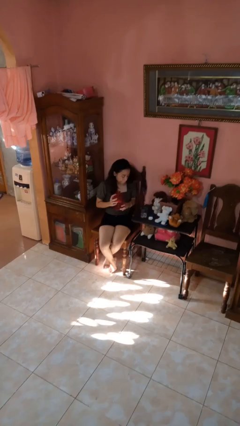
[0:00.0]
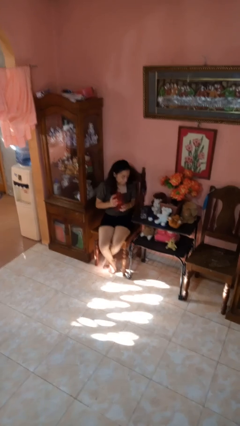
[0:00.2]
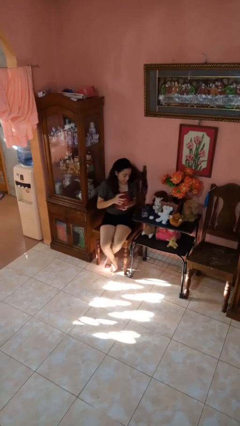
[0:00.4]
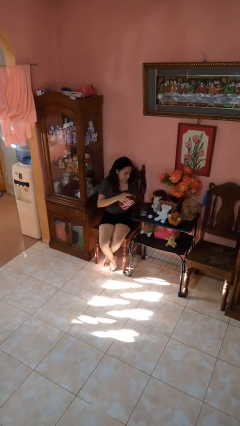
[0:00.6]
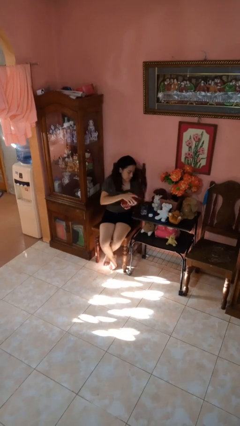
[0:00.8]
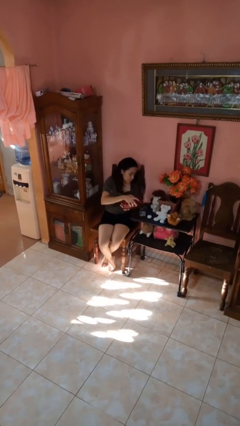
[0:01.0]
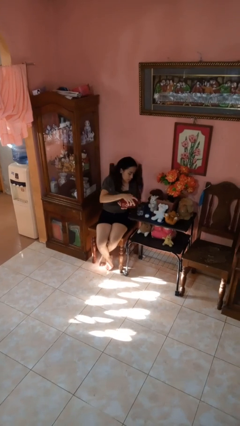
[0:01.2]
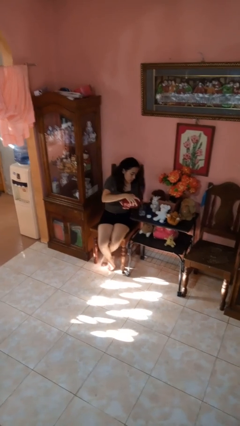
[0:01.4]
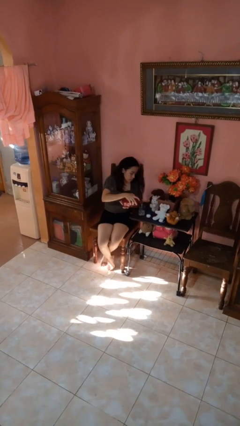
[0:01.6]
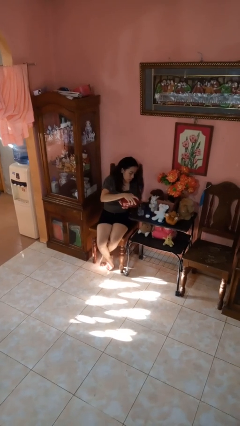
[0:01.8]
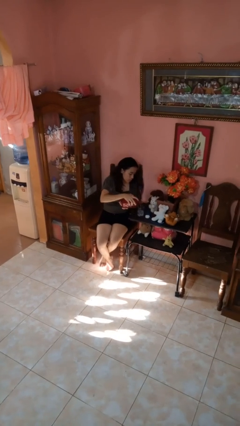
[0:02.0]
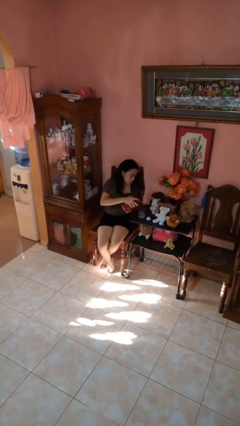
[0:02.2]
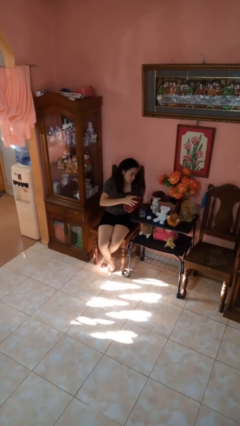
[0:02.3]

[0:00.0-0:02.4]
person pours liquid into cup

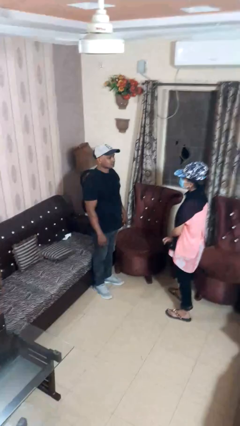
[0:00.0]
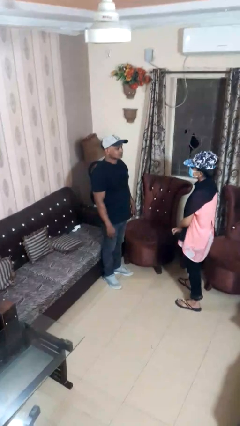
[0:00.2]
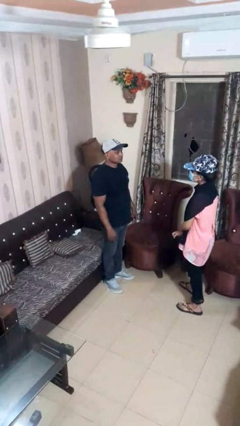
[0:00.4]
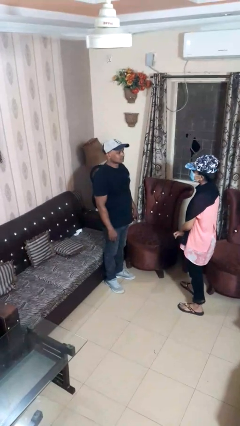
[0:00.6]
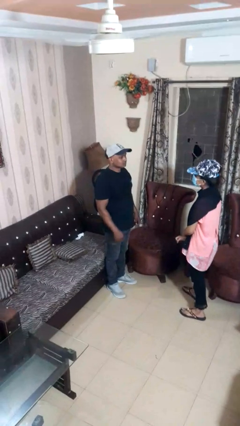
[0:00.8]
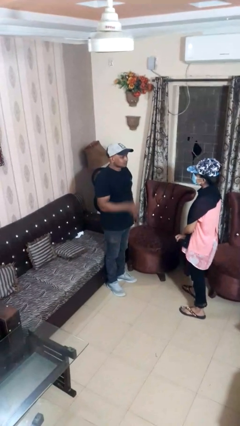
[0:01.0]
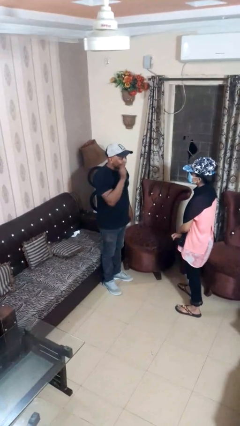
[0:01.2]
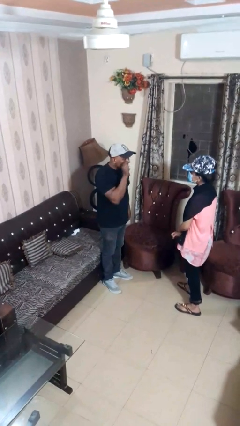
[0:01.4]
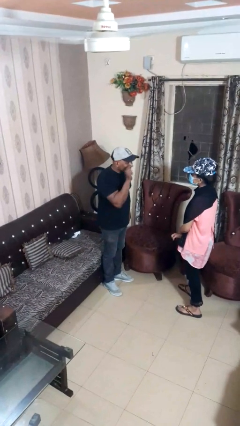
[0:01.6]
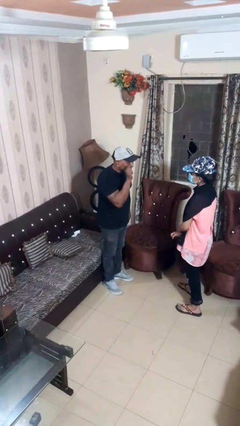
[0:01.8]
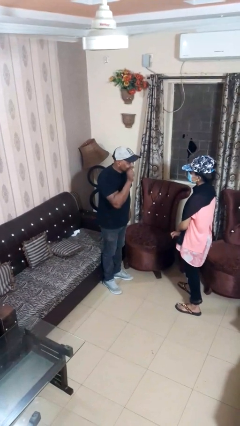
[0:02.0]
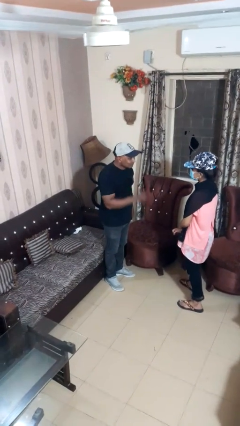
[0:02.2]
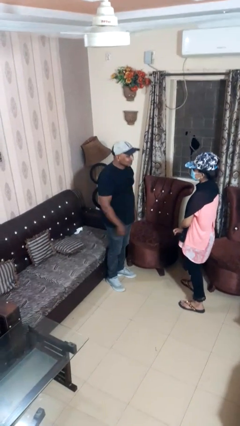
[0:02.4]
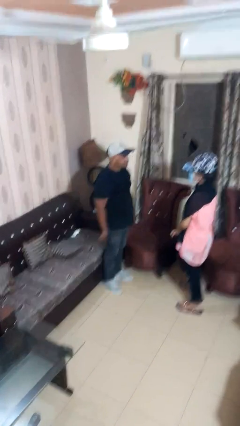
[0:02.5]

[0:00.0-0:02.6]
person points at person

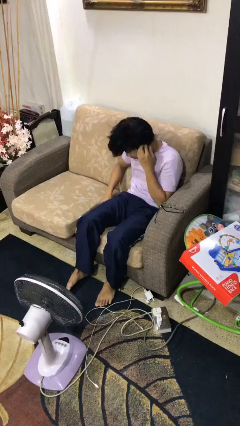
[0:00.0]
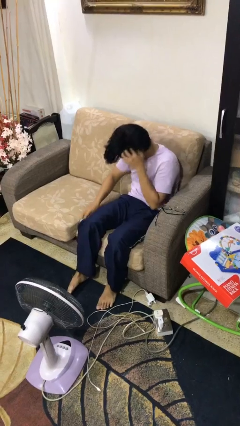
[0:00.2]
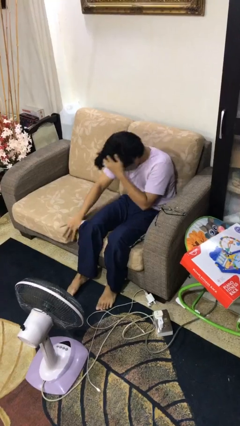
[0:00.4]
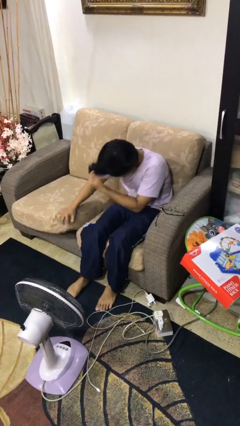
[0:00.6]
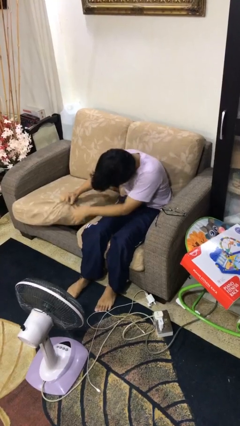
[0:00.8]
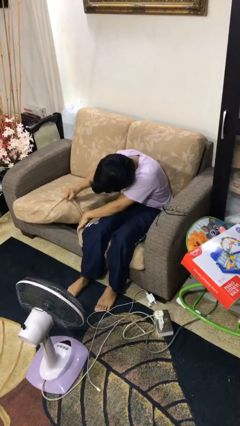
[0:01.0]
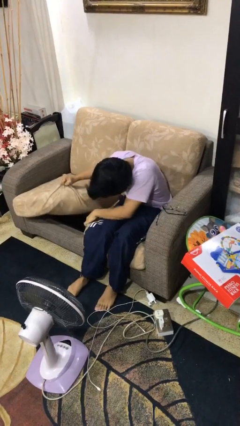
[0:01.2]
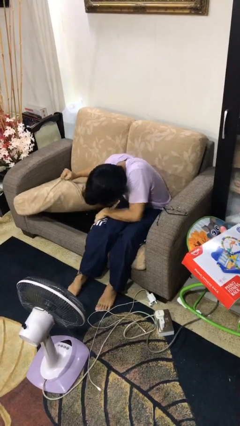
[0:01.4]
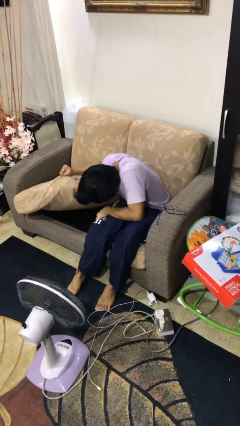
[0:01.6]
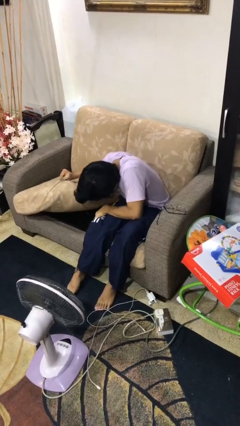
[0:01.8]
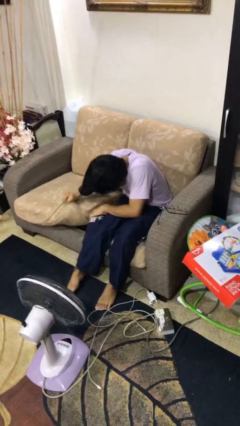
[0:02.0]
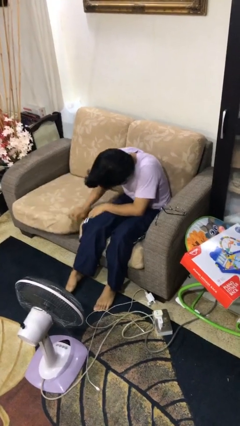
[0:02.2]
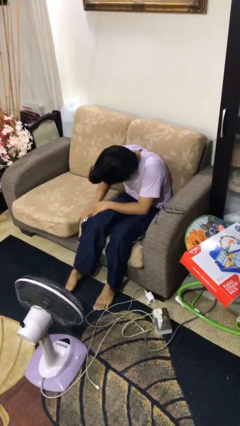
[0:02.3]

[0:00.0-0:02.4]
person searches in couch

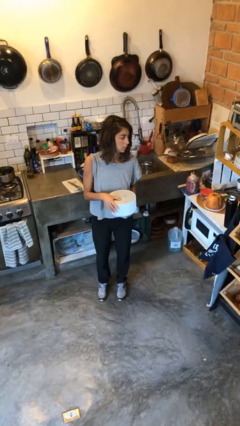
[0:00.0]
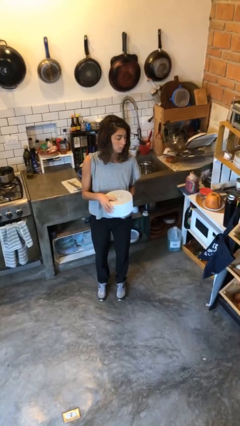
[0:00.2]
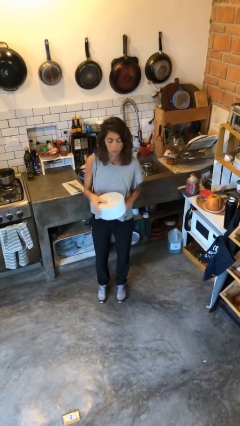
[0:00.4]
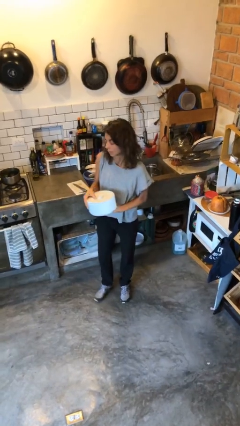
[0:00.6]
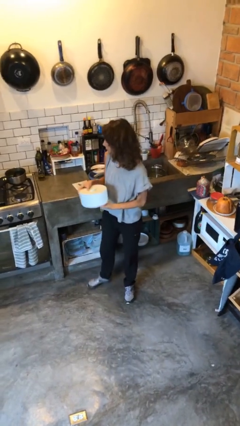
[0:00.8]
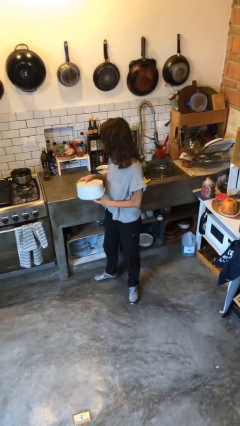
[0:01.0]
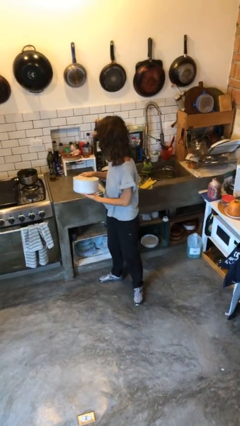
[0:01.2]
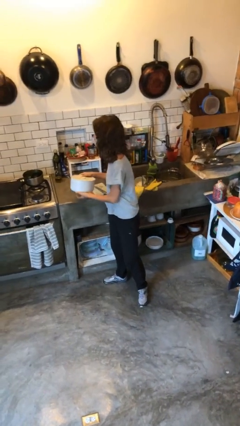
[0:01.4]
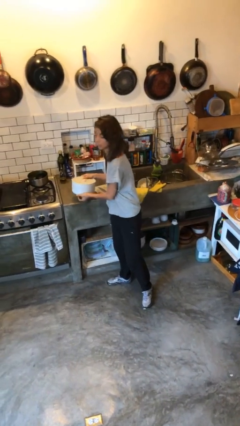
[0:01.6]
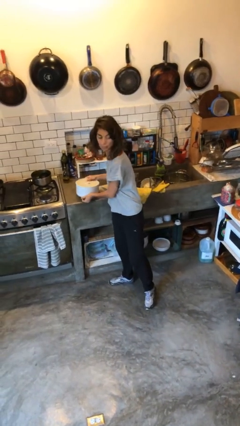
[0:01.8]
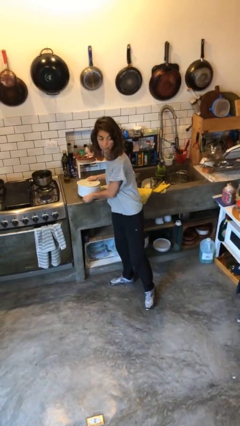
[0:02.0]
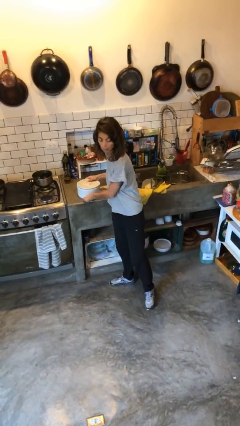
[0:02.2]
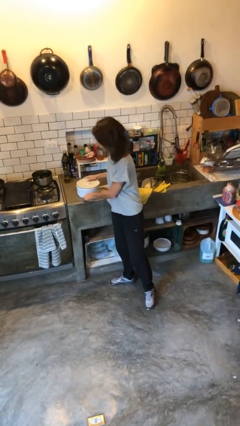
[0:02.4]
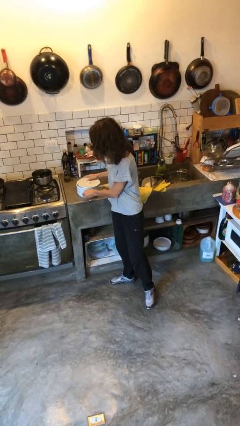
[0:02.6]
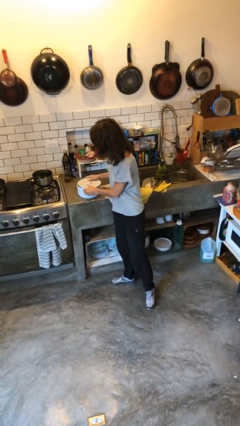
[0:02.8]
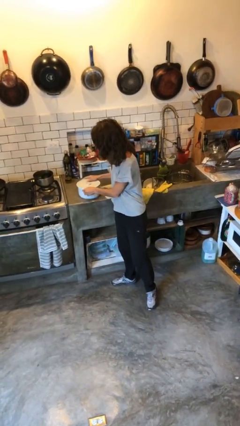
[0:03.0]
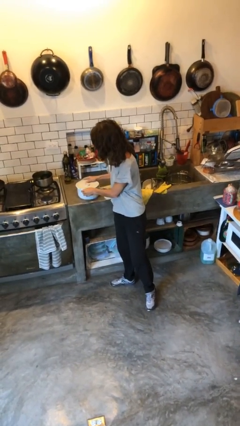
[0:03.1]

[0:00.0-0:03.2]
person puts down object on countertop

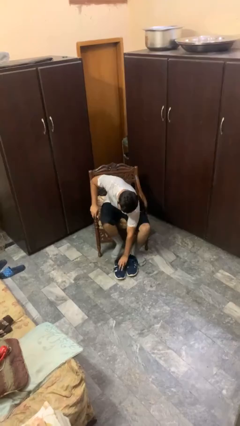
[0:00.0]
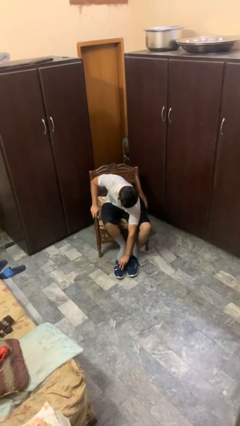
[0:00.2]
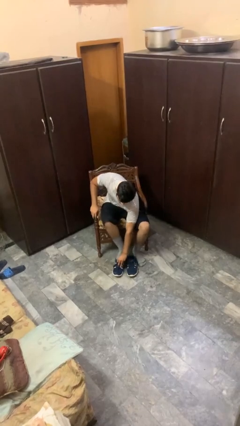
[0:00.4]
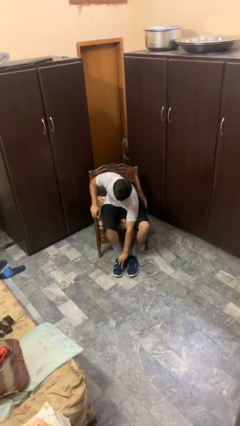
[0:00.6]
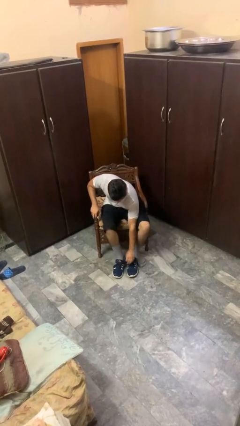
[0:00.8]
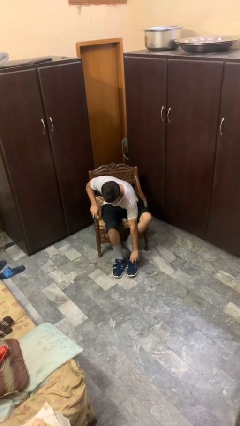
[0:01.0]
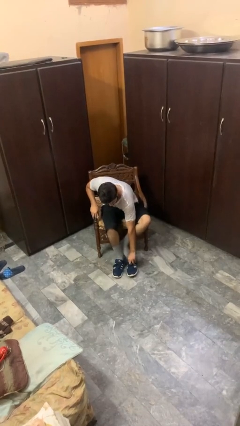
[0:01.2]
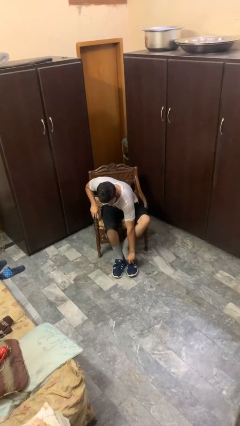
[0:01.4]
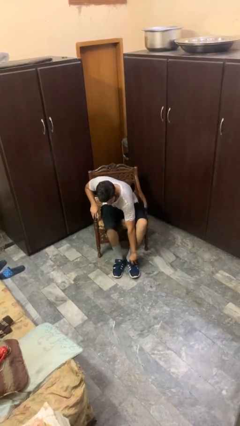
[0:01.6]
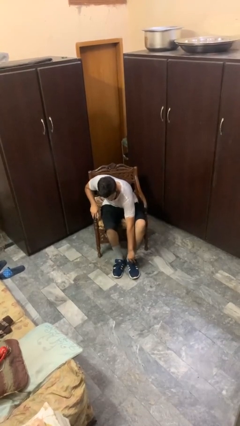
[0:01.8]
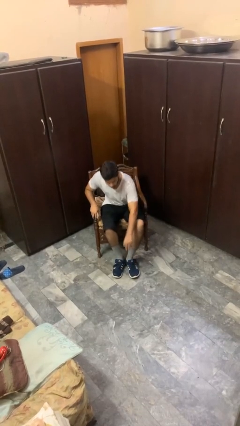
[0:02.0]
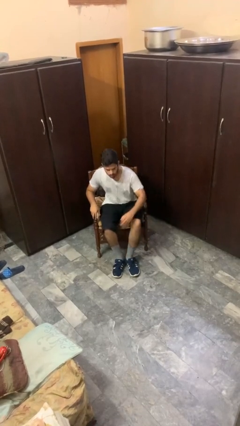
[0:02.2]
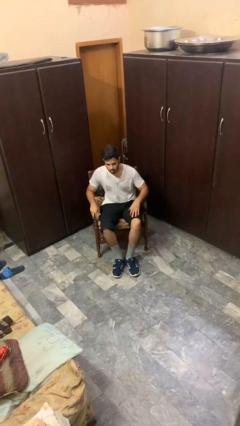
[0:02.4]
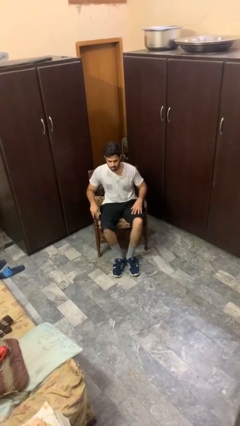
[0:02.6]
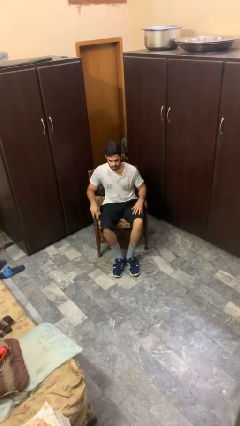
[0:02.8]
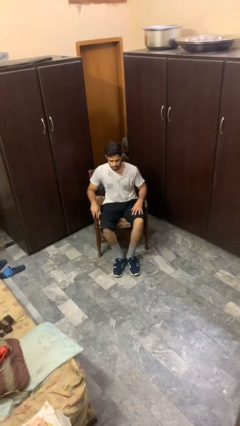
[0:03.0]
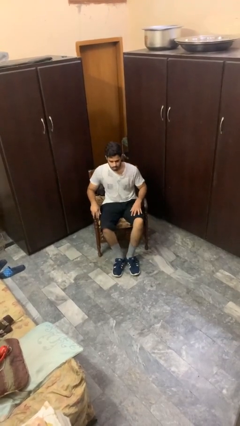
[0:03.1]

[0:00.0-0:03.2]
person puts on shoes

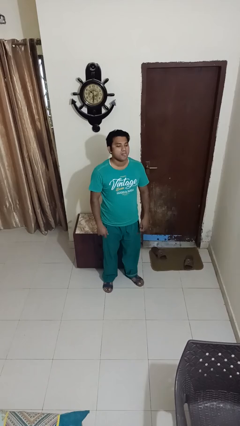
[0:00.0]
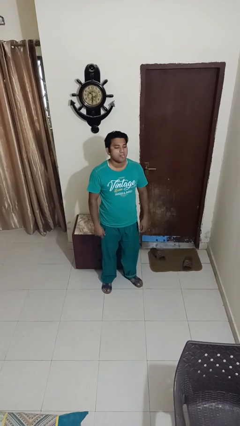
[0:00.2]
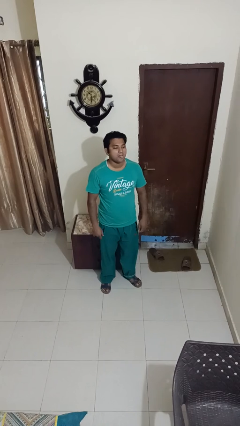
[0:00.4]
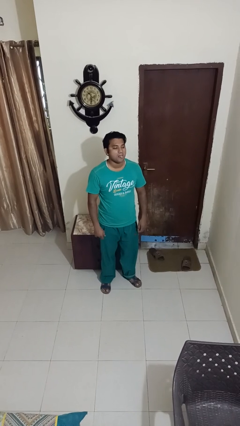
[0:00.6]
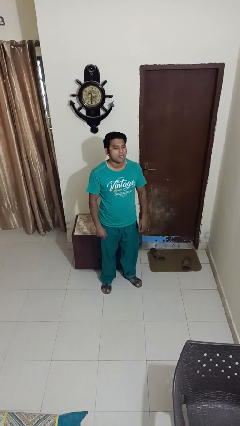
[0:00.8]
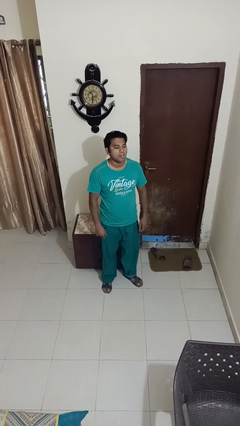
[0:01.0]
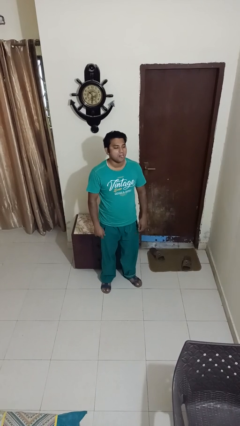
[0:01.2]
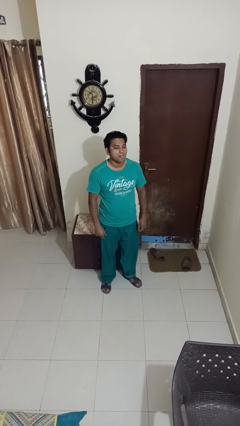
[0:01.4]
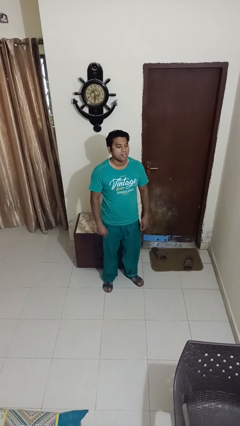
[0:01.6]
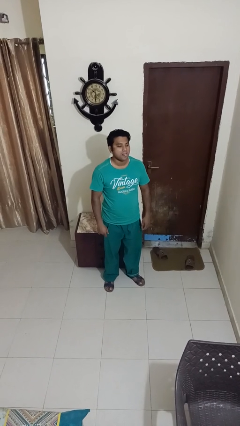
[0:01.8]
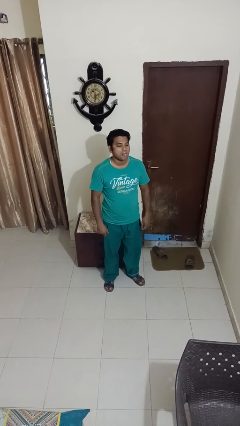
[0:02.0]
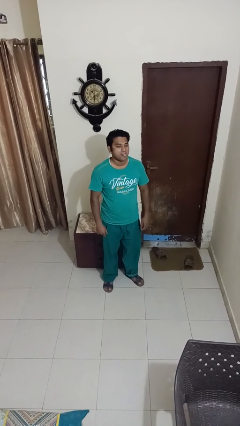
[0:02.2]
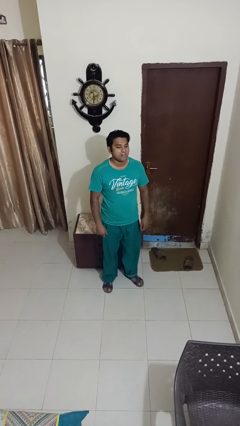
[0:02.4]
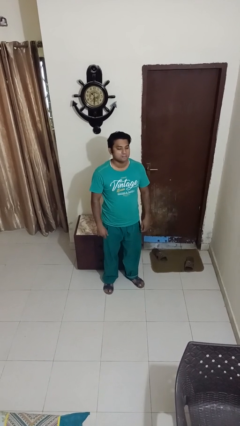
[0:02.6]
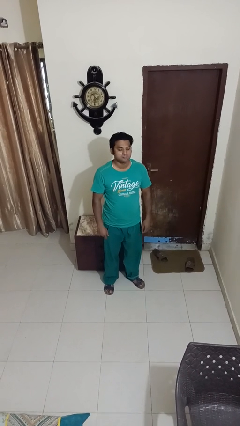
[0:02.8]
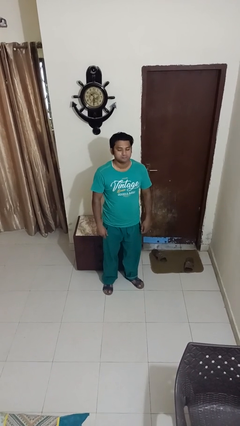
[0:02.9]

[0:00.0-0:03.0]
person sticks out tongue

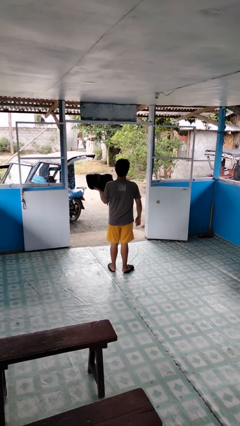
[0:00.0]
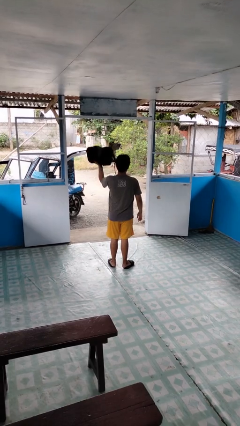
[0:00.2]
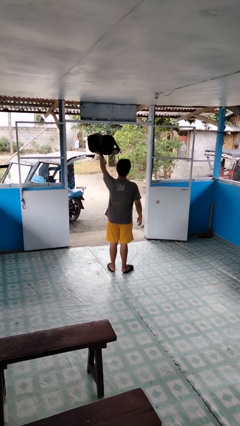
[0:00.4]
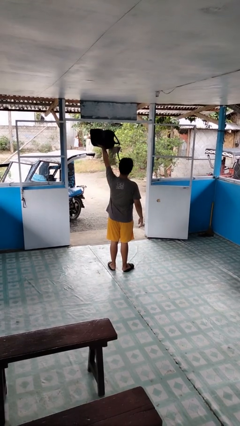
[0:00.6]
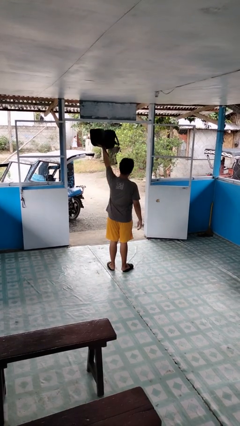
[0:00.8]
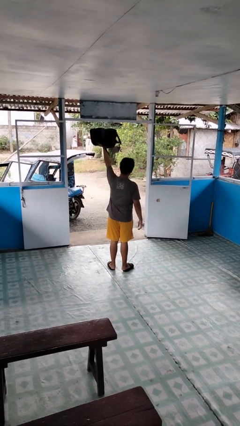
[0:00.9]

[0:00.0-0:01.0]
person holds object above head
